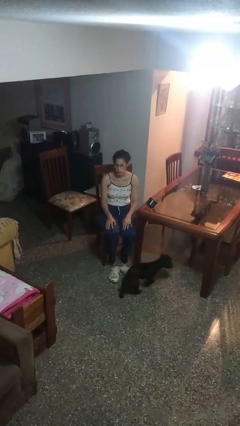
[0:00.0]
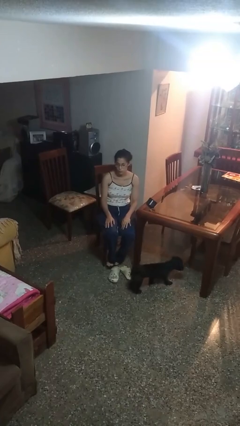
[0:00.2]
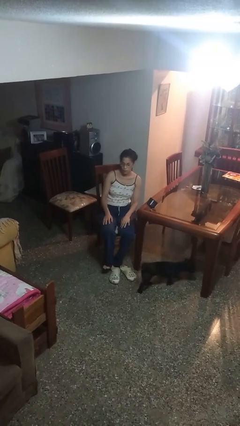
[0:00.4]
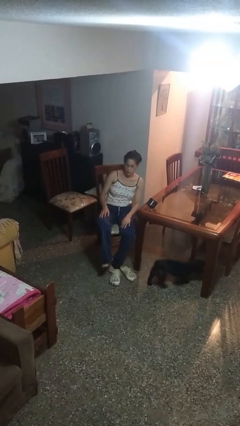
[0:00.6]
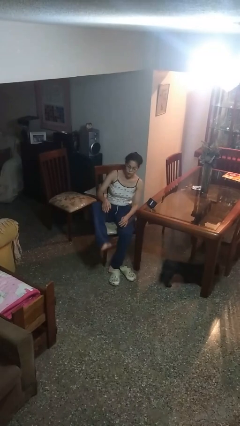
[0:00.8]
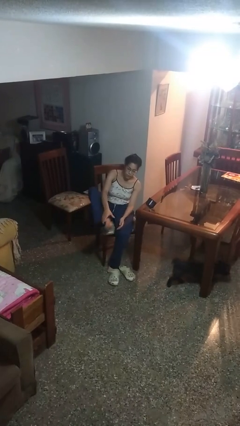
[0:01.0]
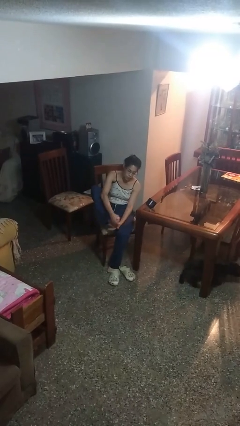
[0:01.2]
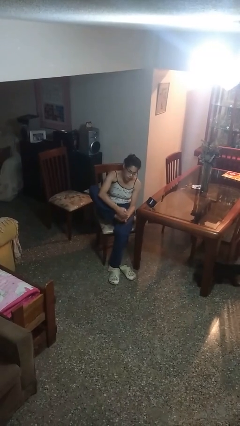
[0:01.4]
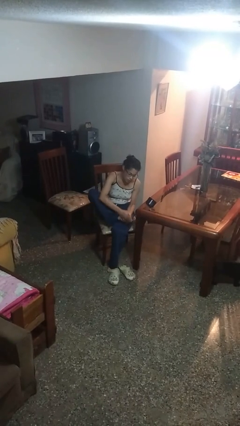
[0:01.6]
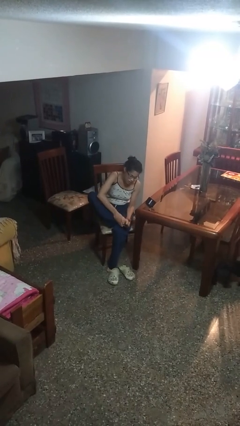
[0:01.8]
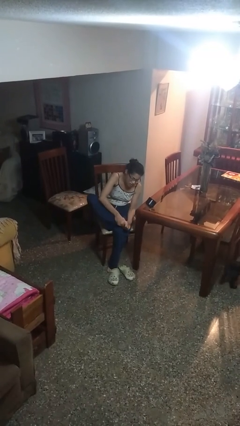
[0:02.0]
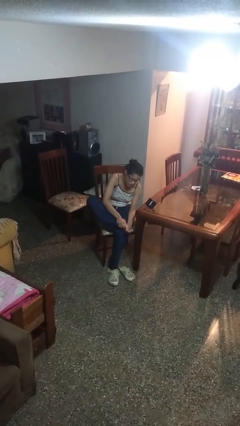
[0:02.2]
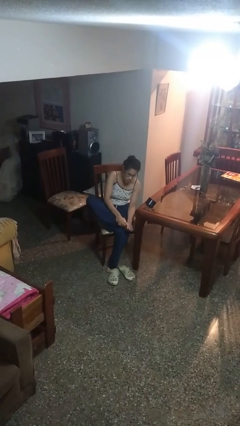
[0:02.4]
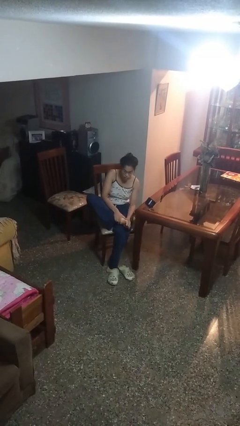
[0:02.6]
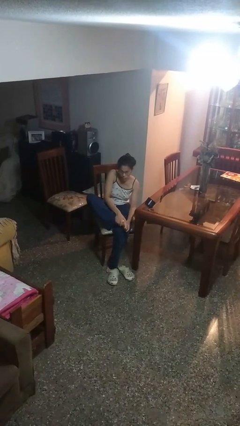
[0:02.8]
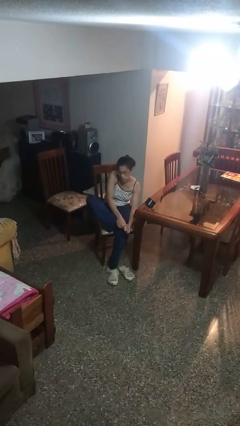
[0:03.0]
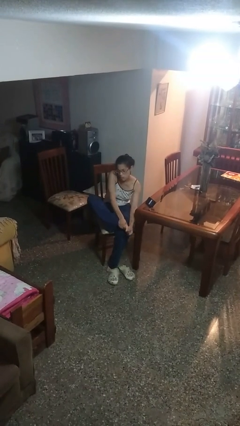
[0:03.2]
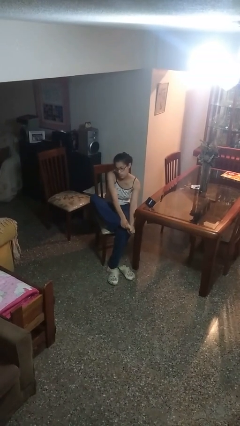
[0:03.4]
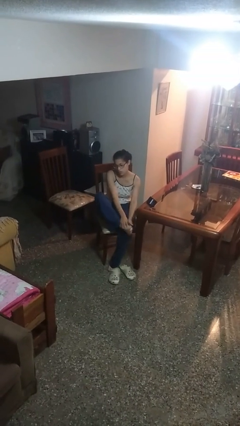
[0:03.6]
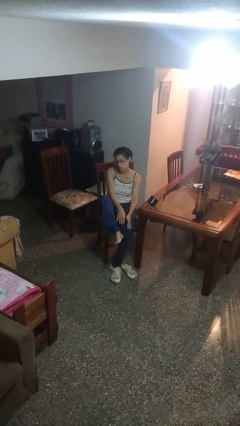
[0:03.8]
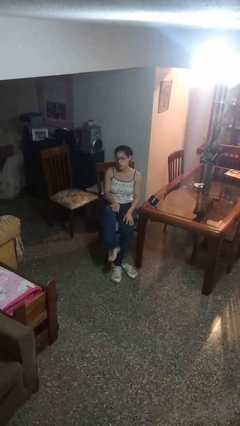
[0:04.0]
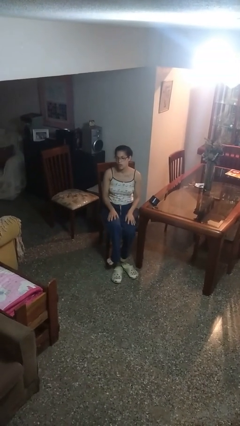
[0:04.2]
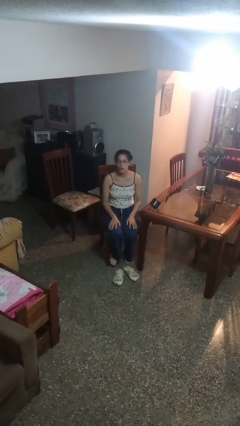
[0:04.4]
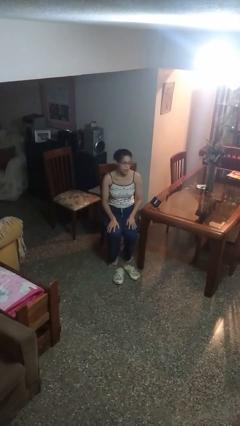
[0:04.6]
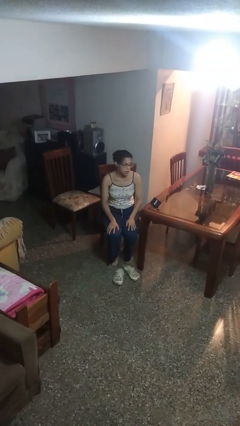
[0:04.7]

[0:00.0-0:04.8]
person rubs foot

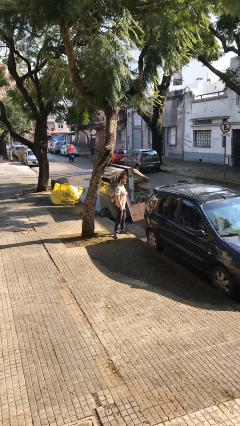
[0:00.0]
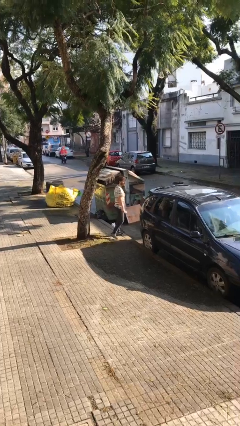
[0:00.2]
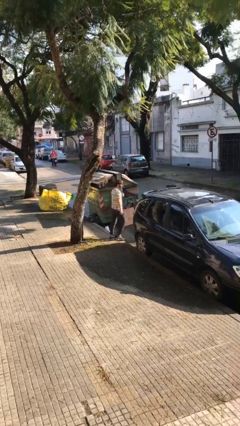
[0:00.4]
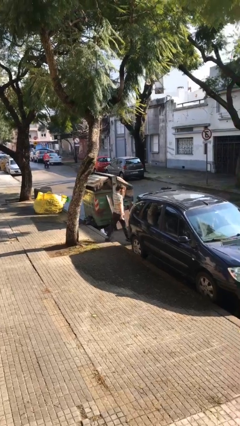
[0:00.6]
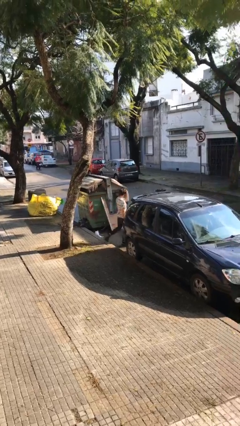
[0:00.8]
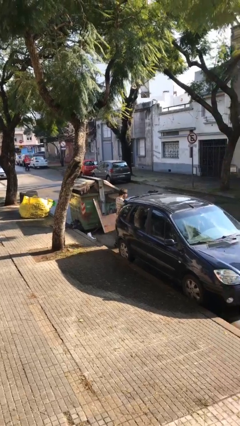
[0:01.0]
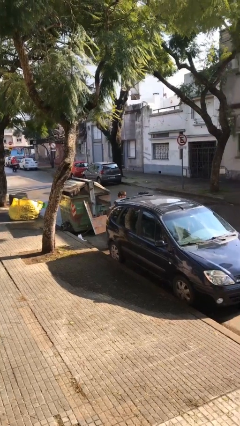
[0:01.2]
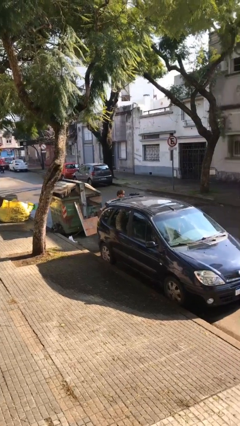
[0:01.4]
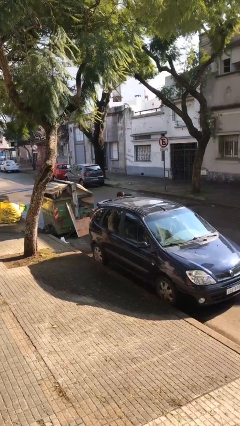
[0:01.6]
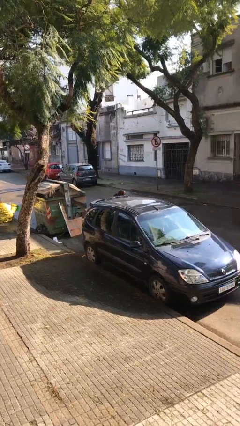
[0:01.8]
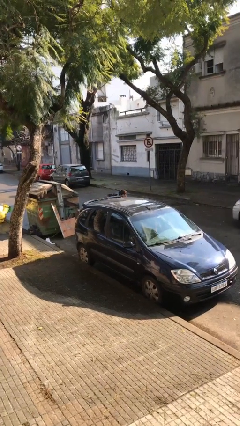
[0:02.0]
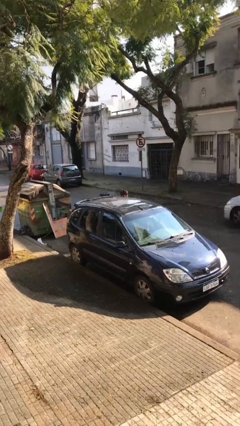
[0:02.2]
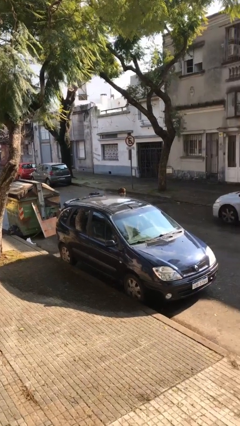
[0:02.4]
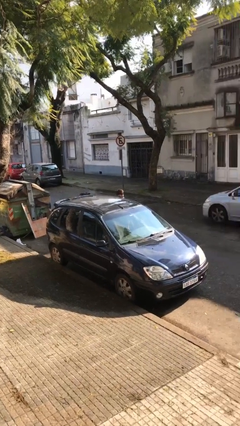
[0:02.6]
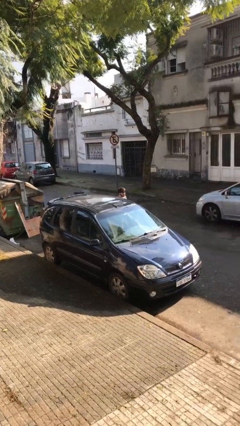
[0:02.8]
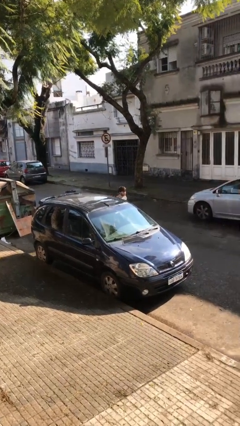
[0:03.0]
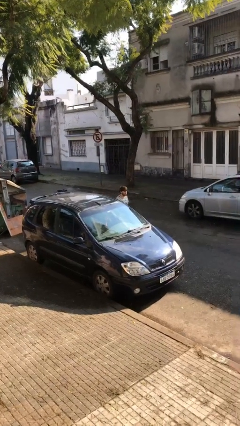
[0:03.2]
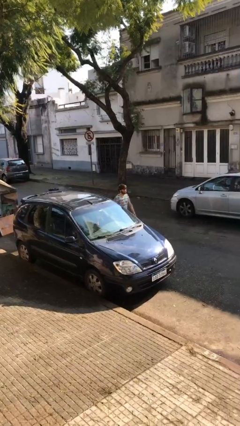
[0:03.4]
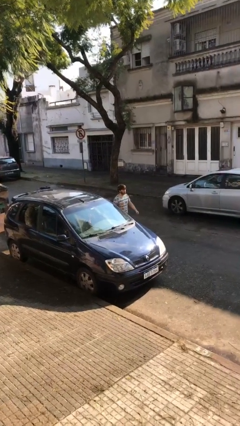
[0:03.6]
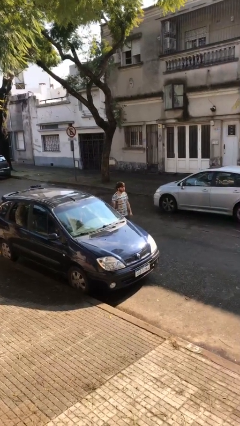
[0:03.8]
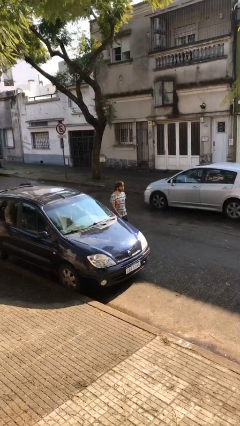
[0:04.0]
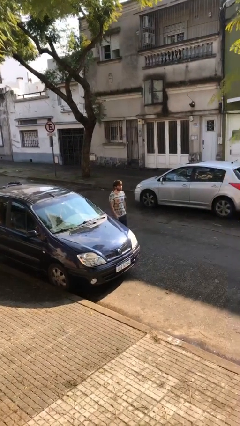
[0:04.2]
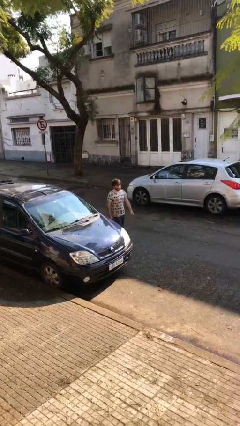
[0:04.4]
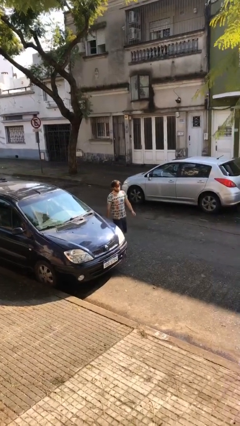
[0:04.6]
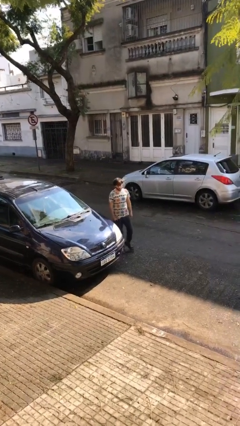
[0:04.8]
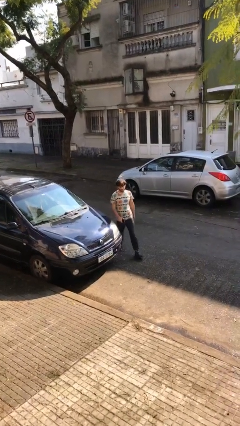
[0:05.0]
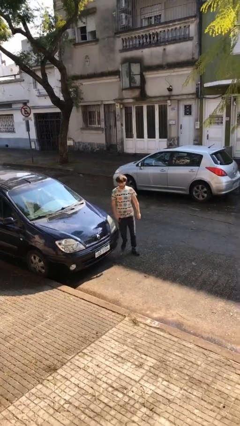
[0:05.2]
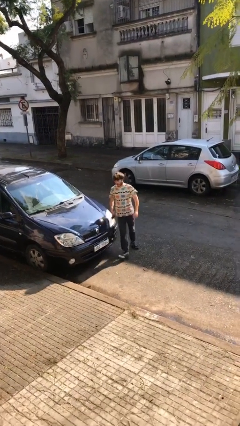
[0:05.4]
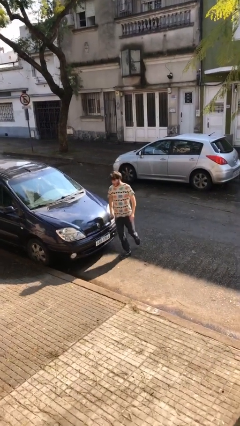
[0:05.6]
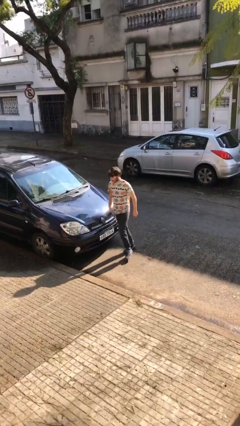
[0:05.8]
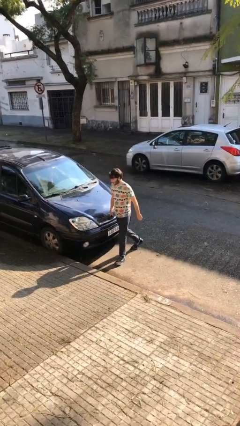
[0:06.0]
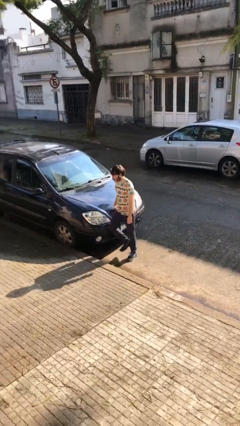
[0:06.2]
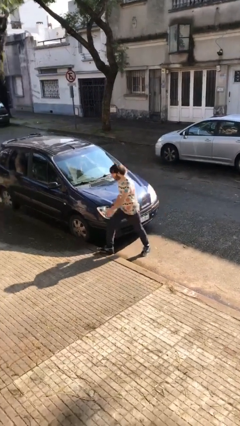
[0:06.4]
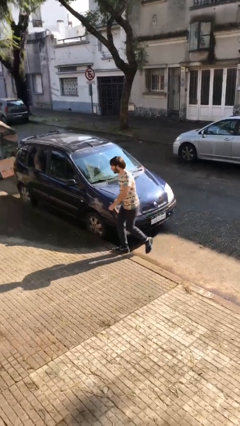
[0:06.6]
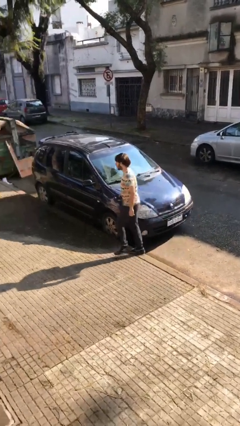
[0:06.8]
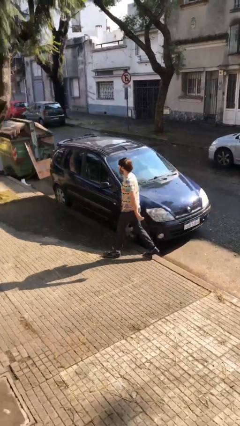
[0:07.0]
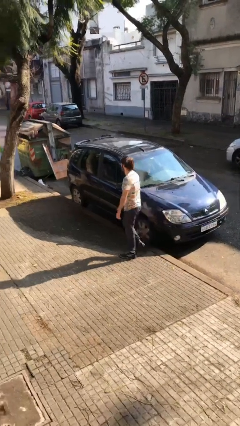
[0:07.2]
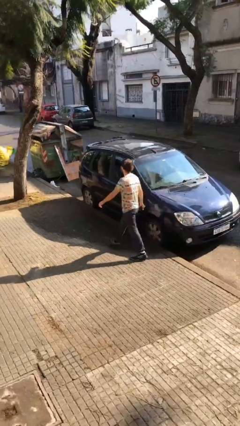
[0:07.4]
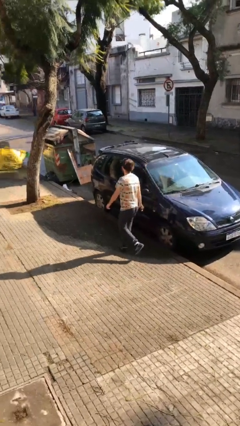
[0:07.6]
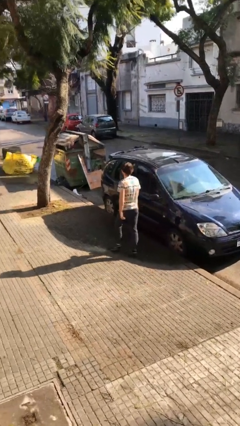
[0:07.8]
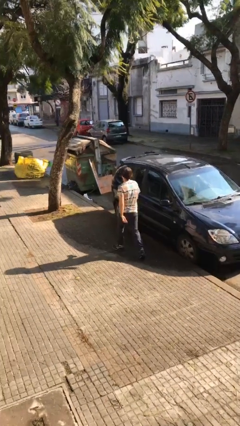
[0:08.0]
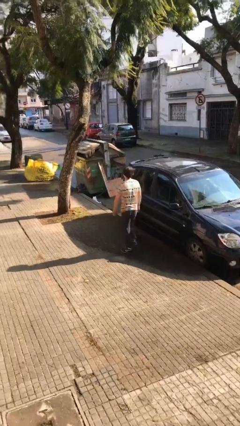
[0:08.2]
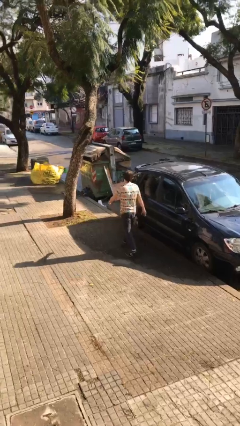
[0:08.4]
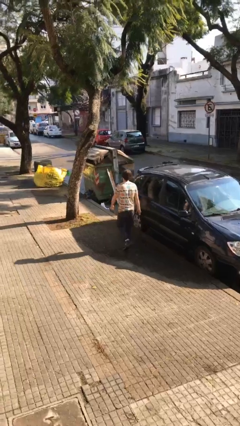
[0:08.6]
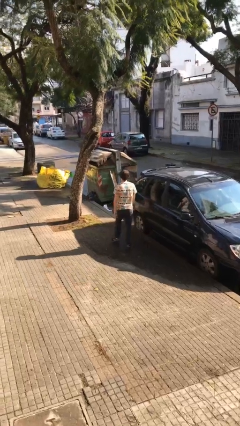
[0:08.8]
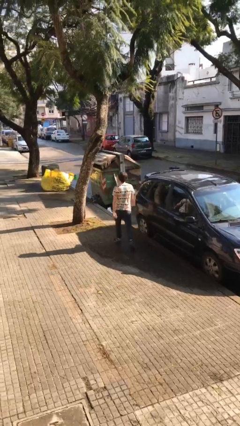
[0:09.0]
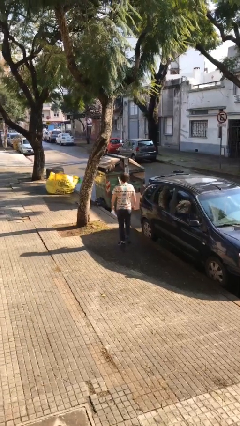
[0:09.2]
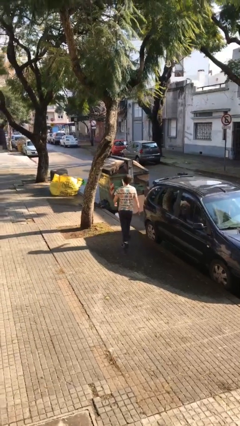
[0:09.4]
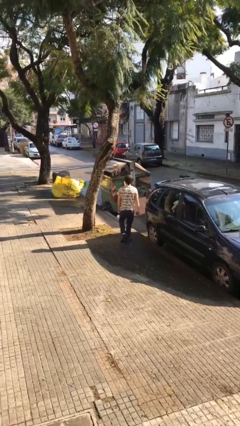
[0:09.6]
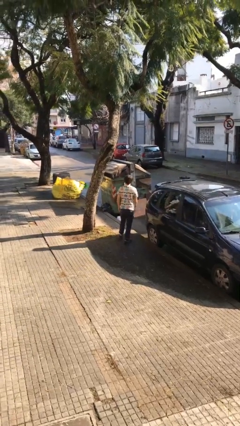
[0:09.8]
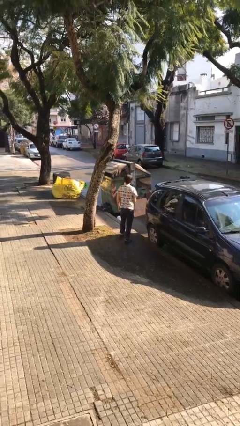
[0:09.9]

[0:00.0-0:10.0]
person walks around car

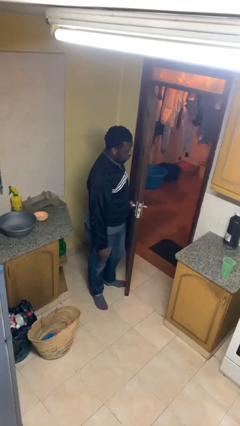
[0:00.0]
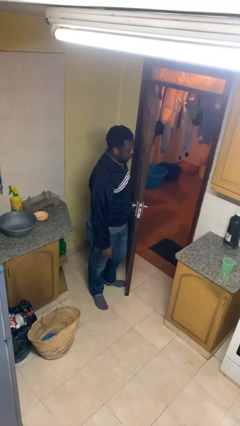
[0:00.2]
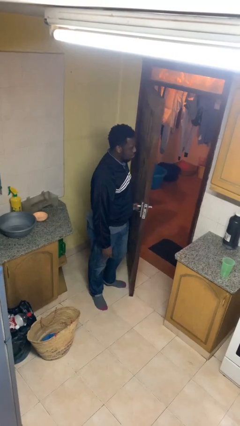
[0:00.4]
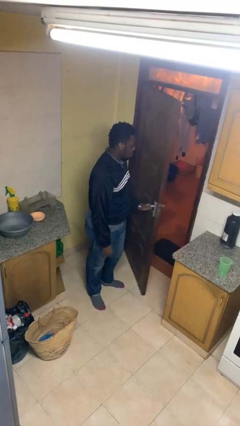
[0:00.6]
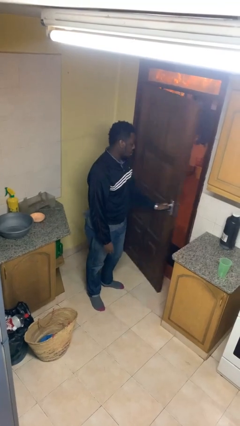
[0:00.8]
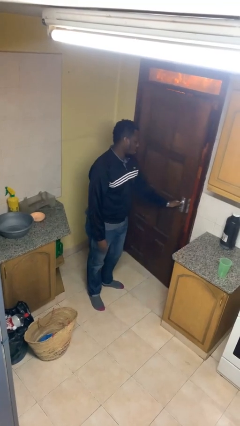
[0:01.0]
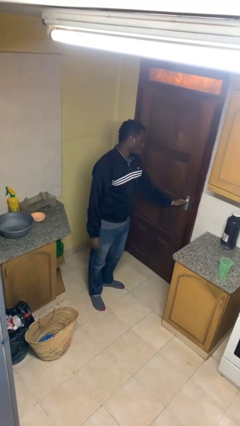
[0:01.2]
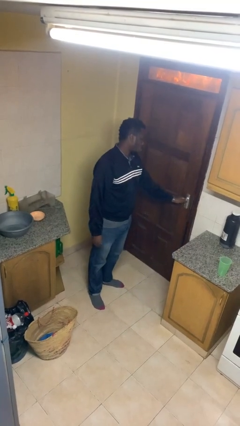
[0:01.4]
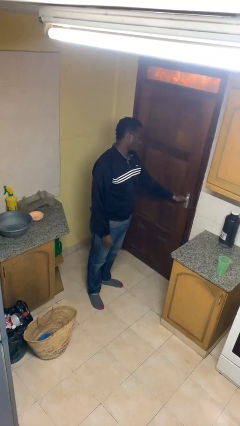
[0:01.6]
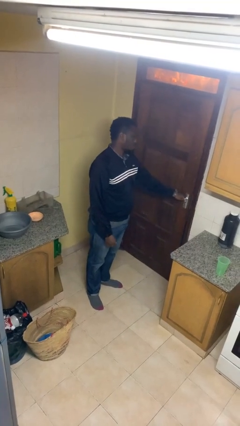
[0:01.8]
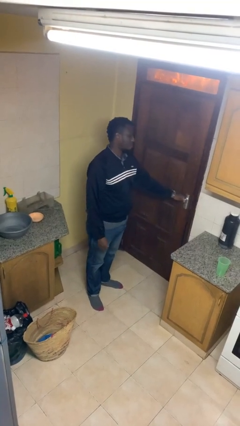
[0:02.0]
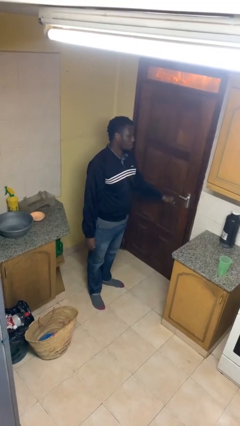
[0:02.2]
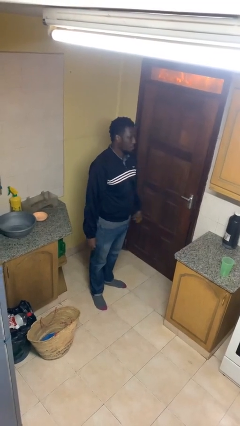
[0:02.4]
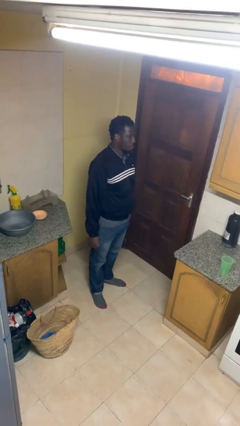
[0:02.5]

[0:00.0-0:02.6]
person closes facility door

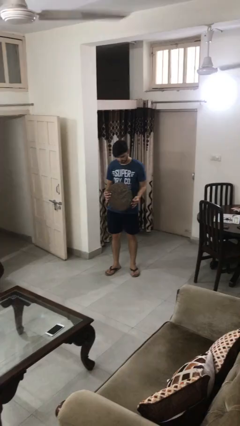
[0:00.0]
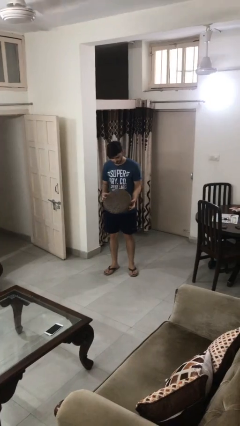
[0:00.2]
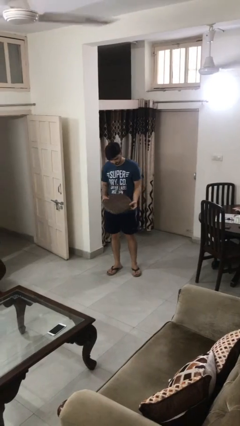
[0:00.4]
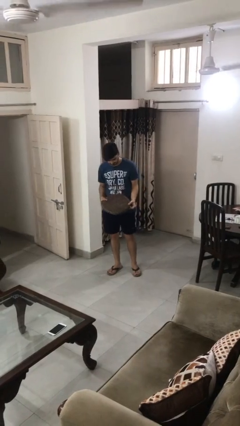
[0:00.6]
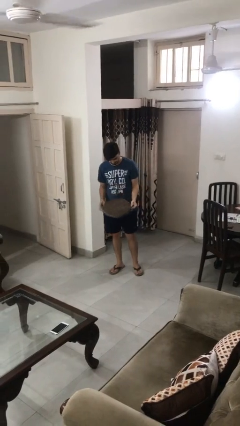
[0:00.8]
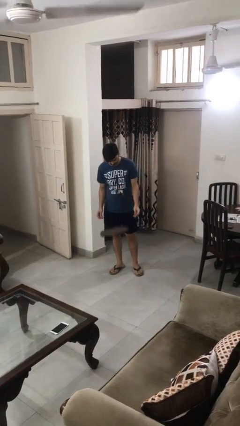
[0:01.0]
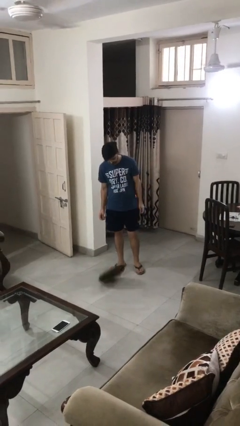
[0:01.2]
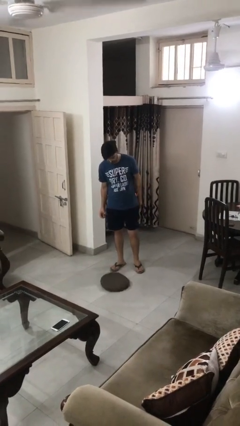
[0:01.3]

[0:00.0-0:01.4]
person drops object
